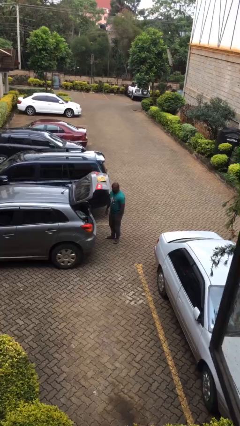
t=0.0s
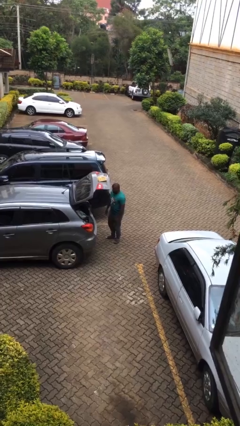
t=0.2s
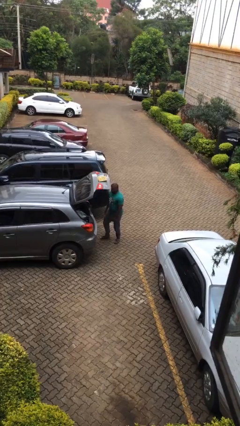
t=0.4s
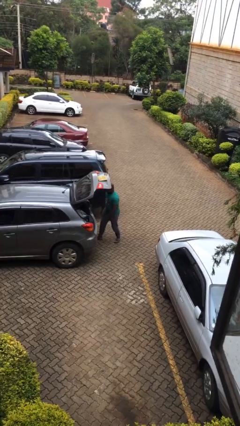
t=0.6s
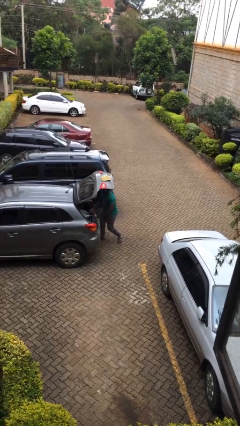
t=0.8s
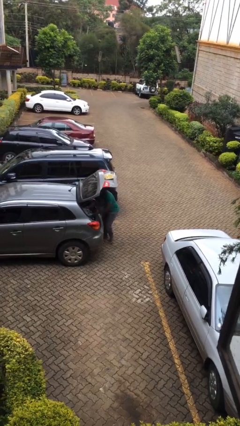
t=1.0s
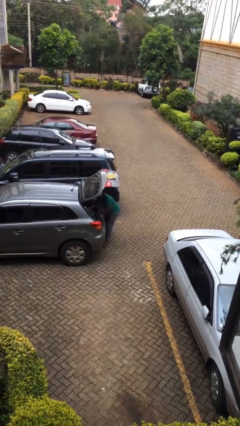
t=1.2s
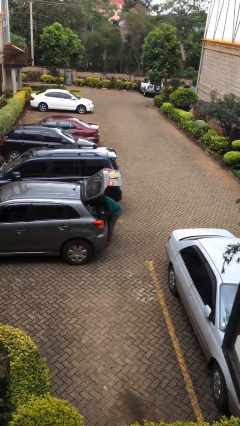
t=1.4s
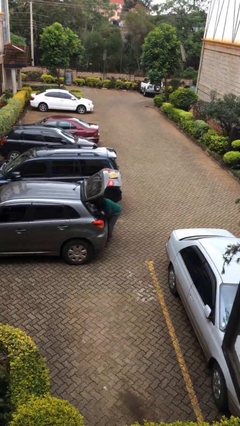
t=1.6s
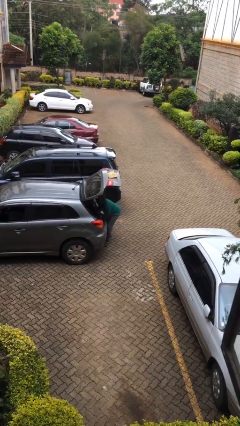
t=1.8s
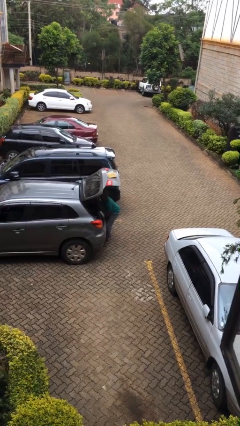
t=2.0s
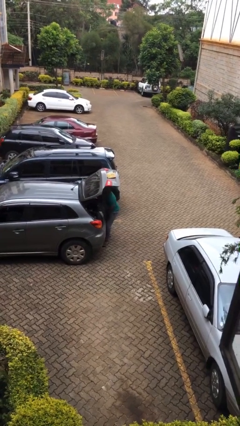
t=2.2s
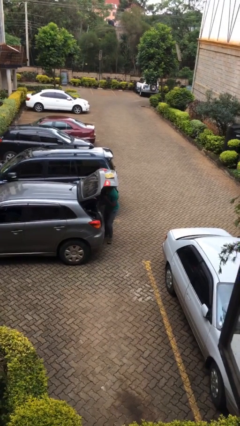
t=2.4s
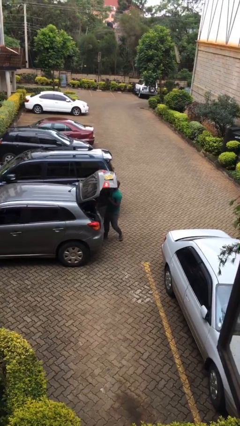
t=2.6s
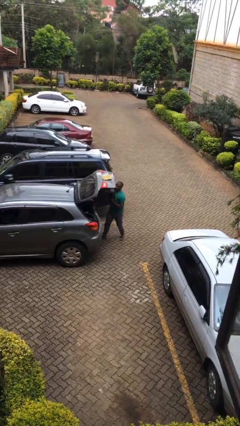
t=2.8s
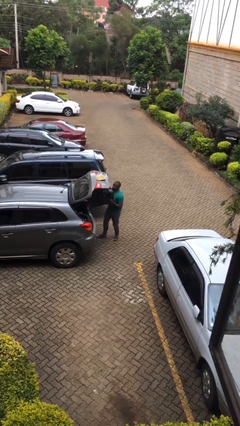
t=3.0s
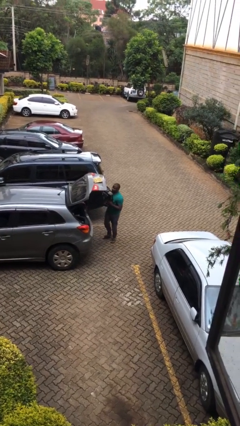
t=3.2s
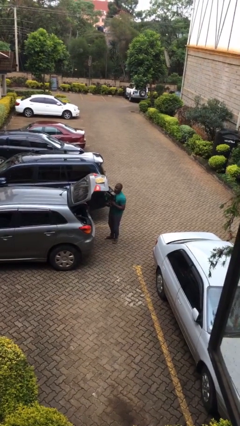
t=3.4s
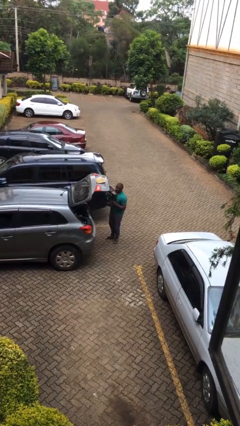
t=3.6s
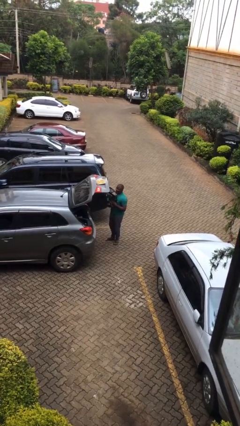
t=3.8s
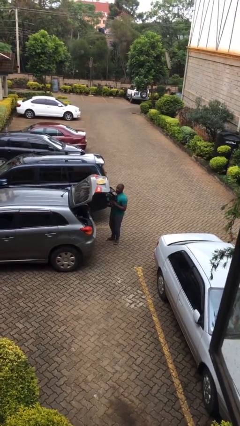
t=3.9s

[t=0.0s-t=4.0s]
person unloads car

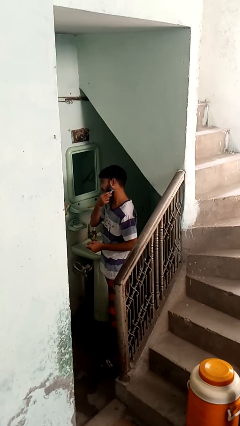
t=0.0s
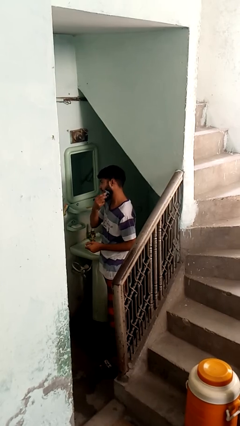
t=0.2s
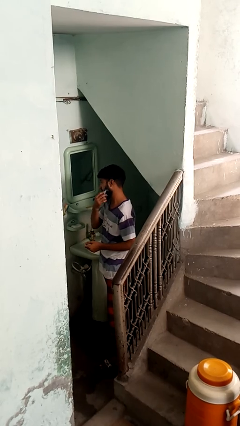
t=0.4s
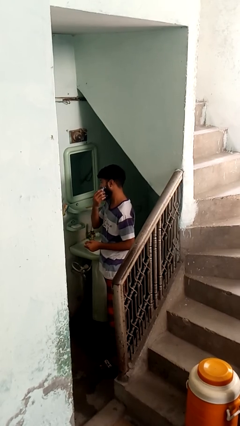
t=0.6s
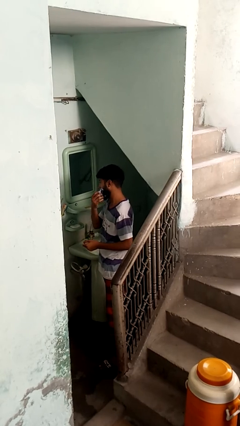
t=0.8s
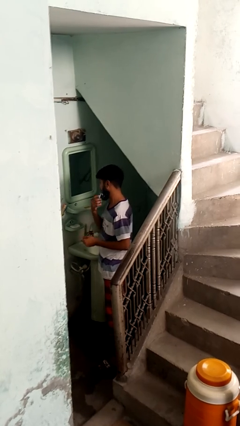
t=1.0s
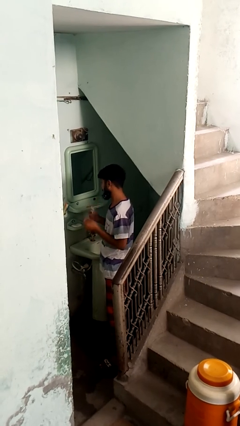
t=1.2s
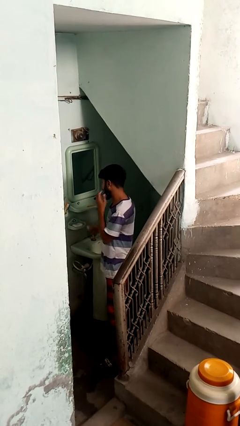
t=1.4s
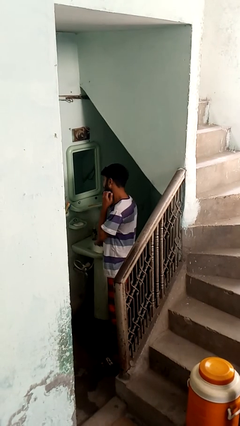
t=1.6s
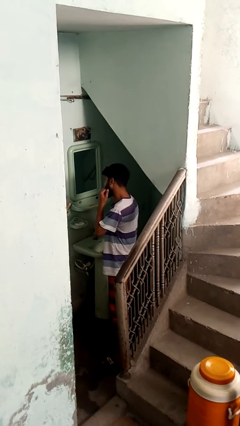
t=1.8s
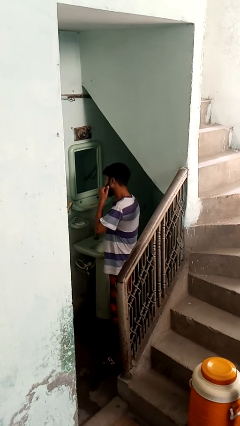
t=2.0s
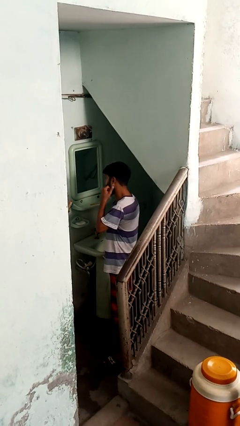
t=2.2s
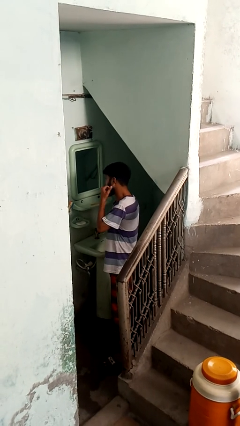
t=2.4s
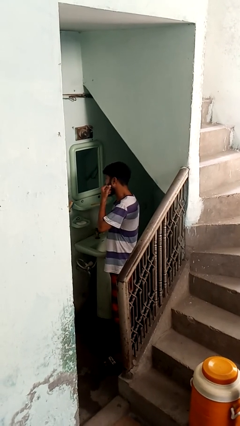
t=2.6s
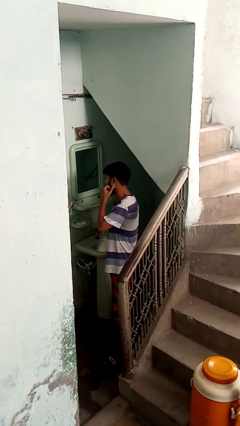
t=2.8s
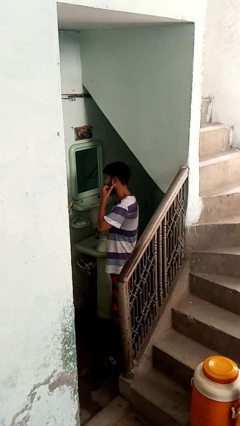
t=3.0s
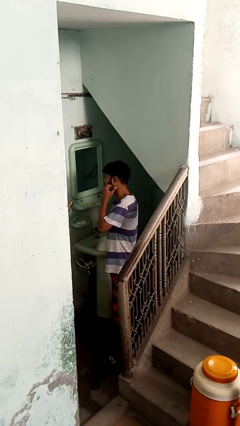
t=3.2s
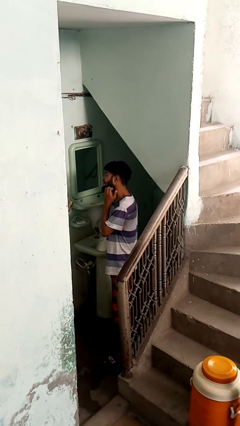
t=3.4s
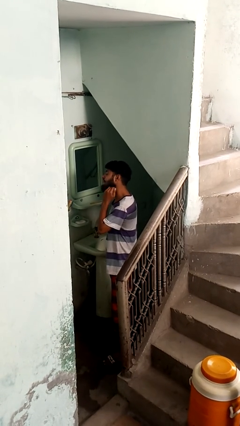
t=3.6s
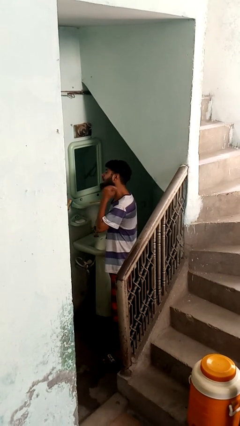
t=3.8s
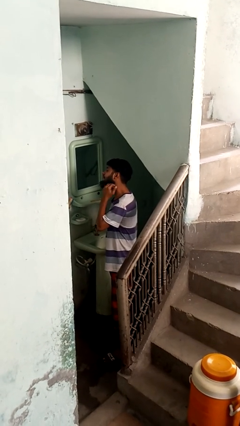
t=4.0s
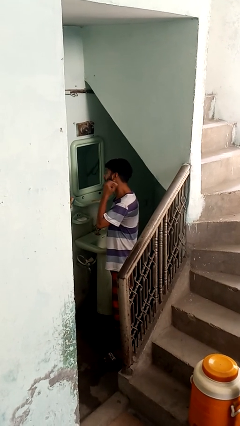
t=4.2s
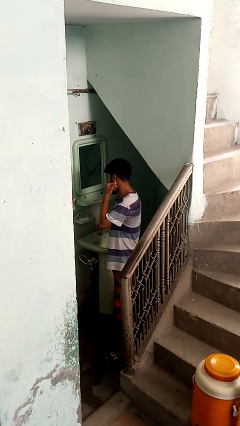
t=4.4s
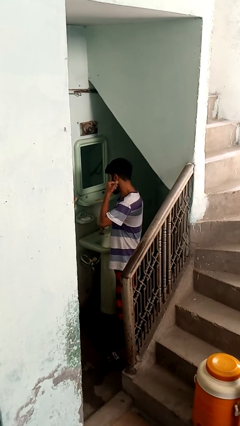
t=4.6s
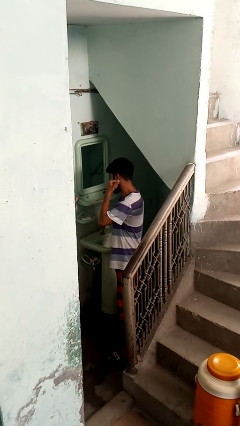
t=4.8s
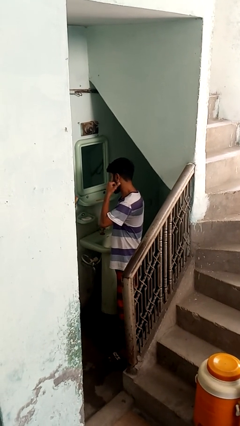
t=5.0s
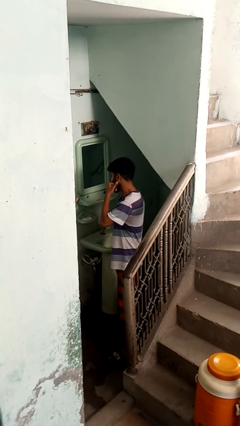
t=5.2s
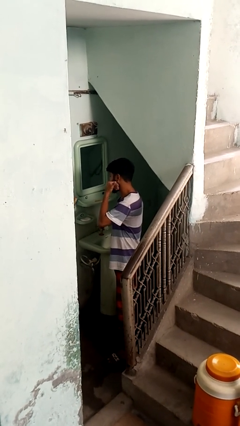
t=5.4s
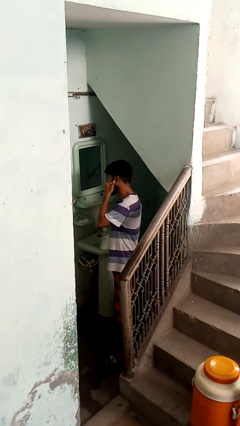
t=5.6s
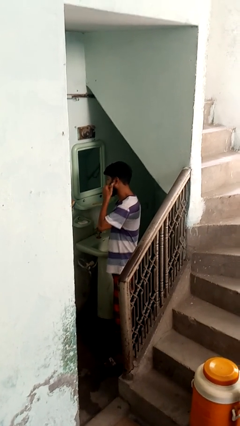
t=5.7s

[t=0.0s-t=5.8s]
person applies shaving cream

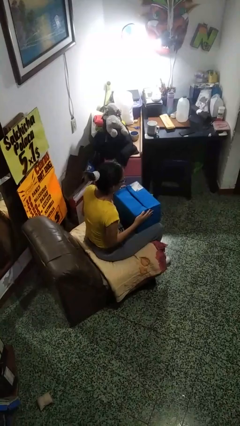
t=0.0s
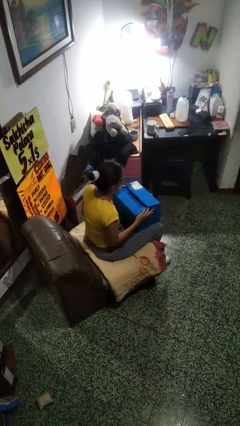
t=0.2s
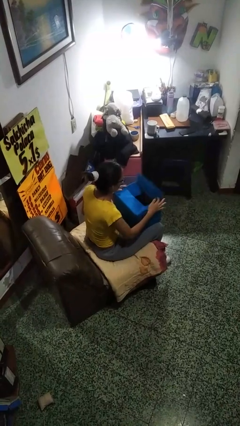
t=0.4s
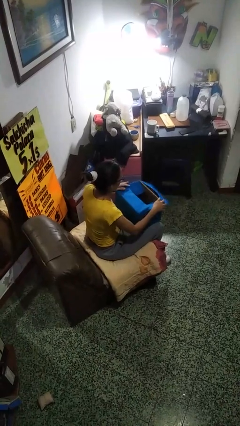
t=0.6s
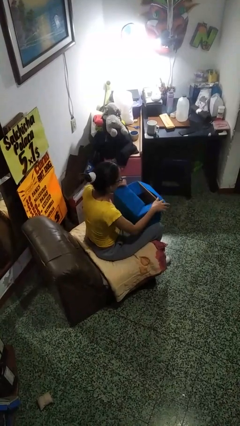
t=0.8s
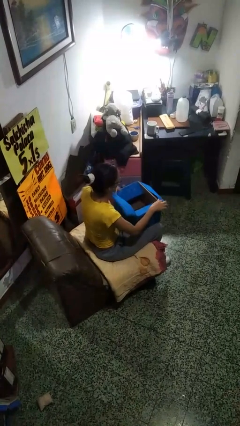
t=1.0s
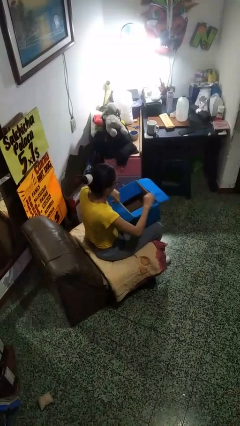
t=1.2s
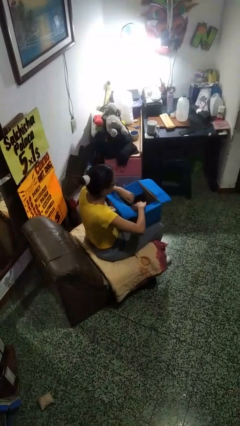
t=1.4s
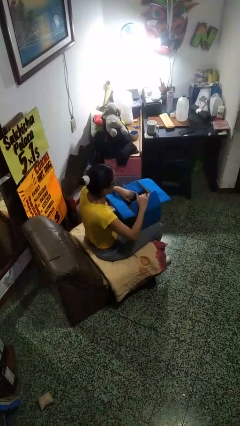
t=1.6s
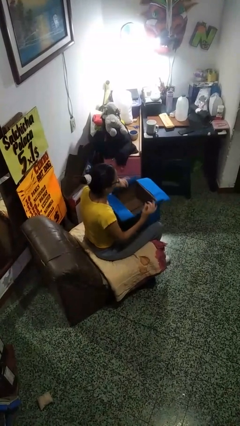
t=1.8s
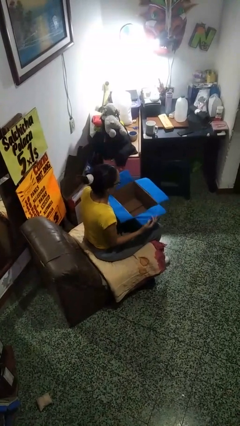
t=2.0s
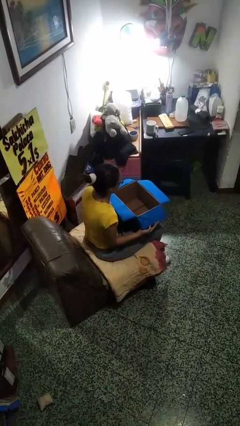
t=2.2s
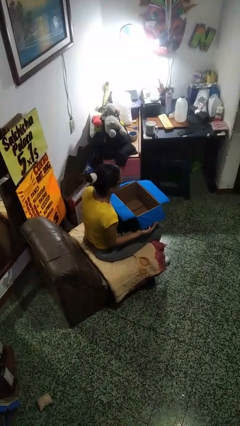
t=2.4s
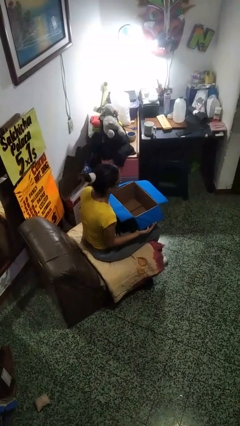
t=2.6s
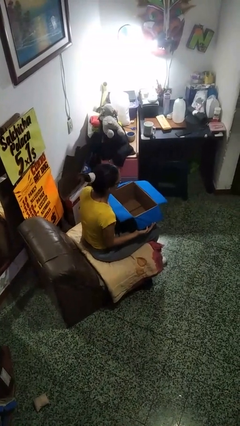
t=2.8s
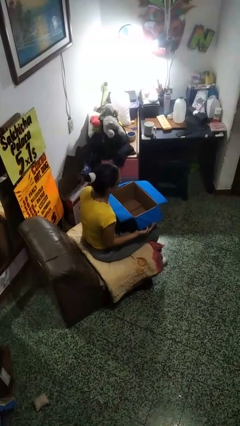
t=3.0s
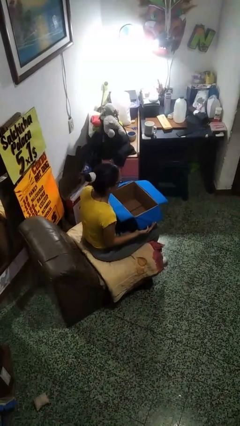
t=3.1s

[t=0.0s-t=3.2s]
person opens box

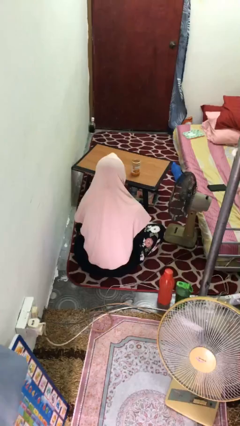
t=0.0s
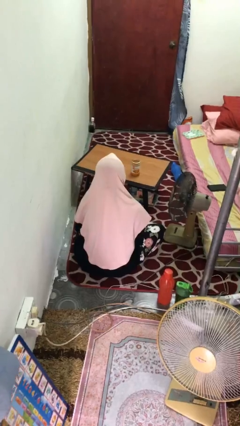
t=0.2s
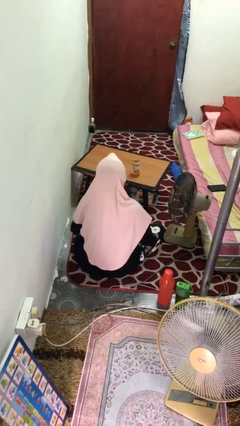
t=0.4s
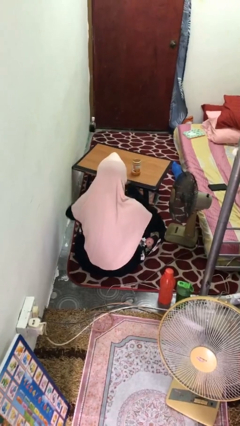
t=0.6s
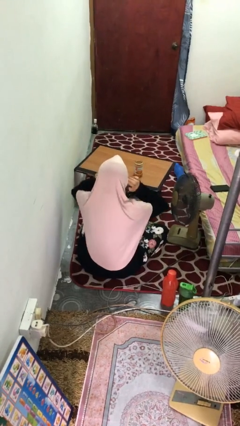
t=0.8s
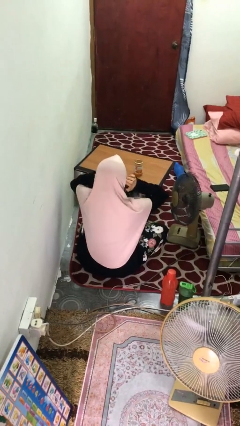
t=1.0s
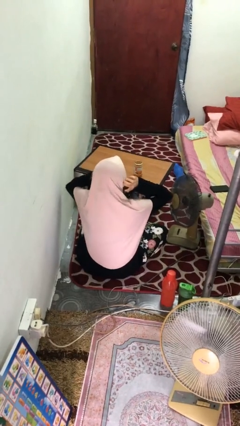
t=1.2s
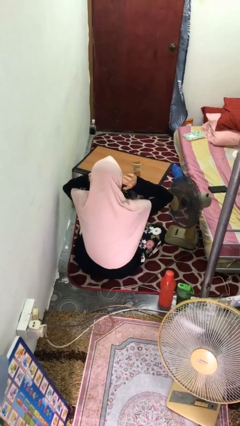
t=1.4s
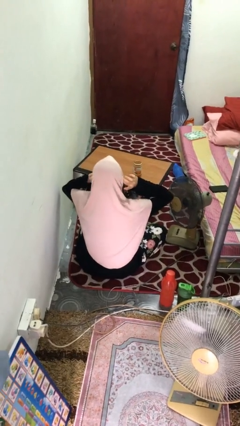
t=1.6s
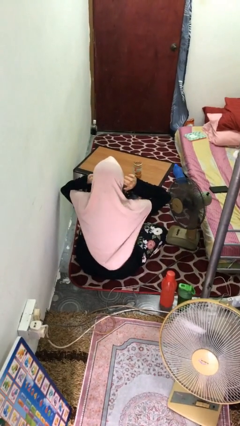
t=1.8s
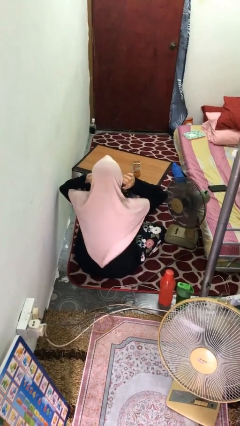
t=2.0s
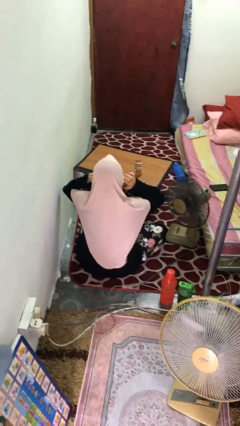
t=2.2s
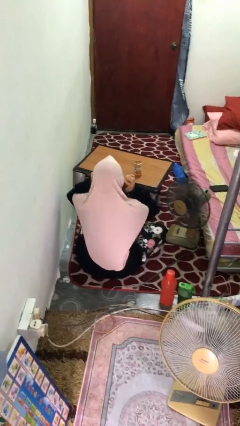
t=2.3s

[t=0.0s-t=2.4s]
person puts fingers in ear

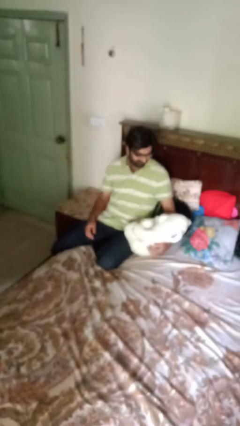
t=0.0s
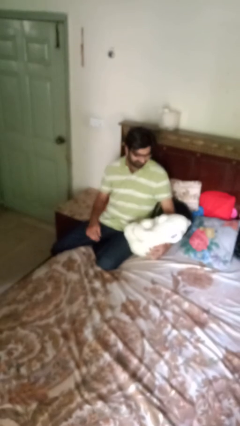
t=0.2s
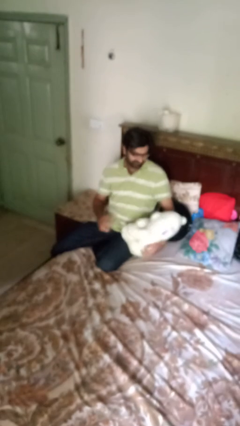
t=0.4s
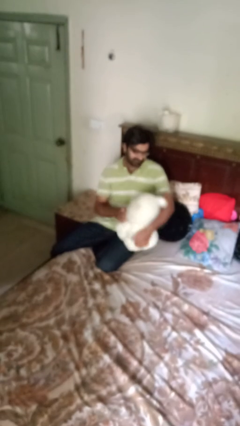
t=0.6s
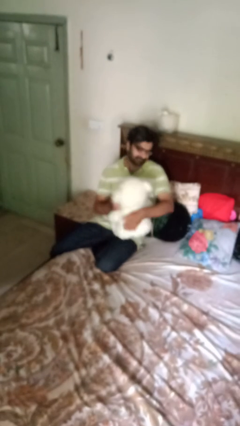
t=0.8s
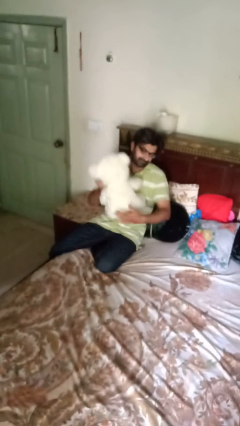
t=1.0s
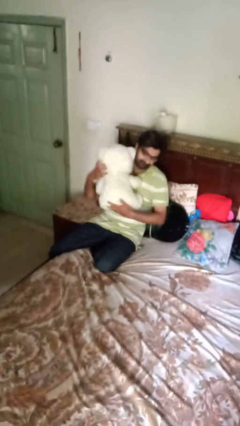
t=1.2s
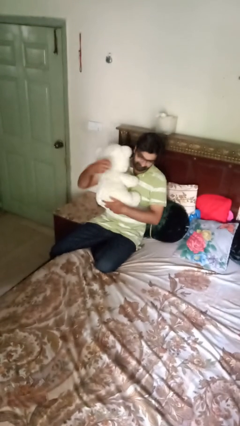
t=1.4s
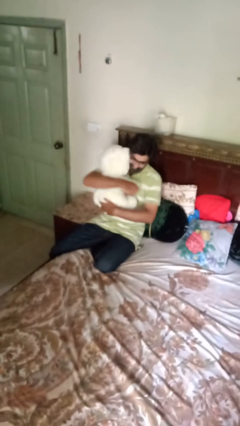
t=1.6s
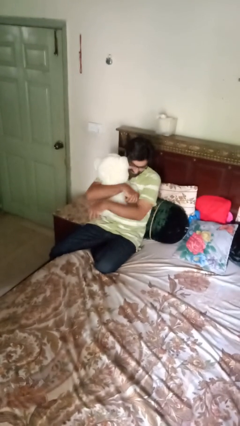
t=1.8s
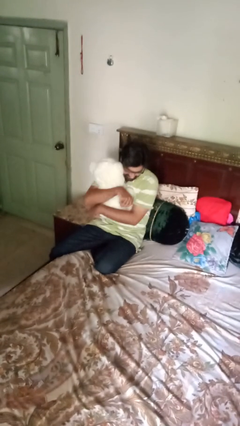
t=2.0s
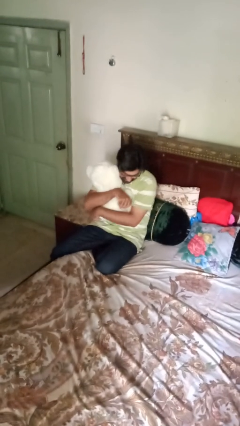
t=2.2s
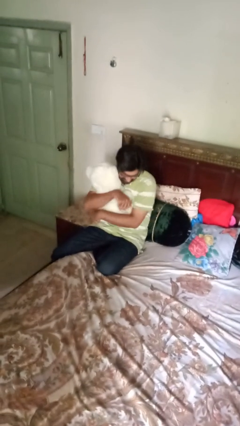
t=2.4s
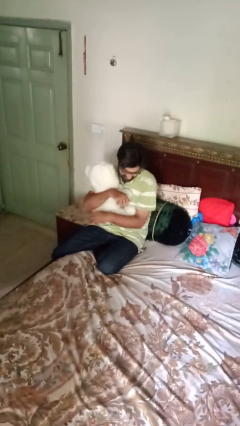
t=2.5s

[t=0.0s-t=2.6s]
person hugs stuffed animal
